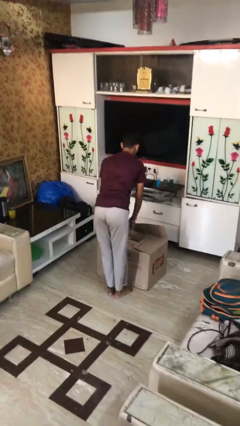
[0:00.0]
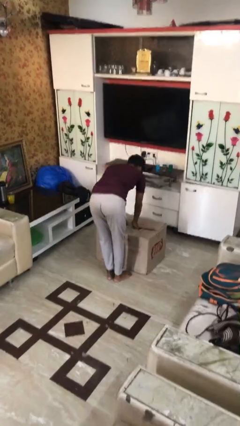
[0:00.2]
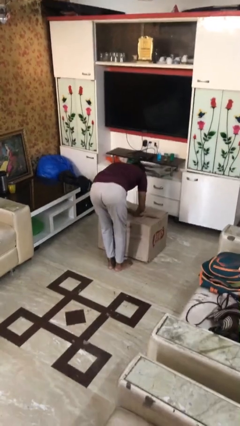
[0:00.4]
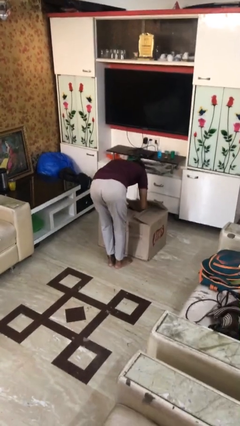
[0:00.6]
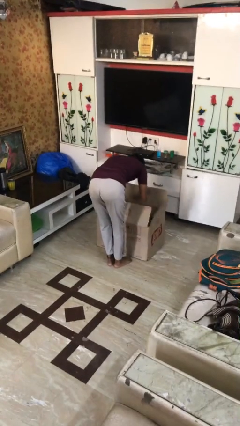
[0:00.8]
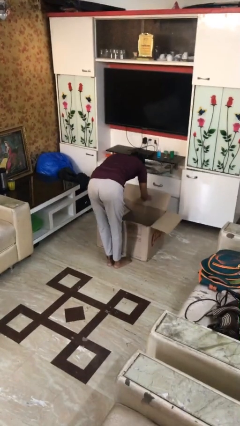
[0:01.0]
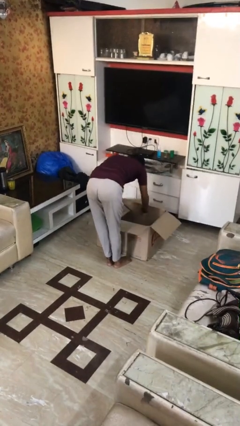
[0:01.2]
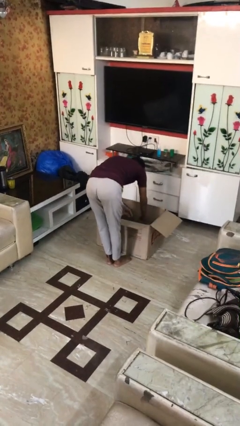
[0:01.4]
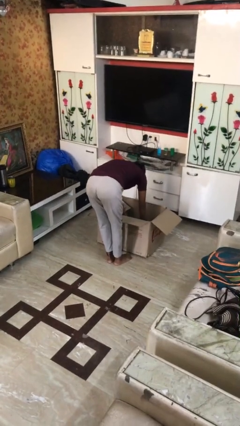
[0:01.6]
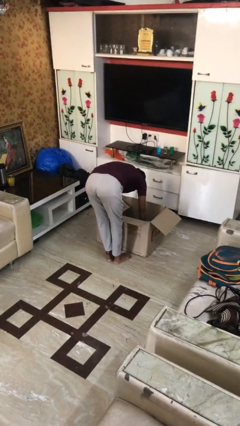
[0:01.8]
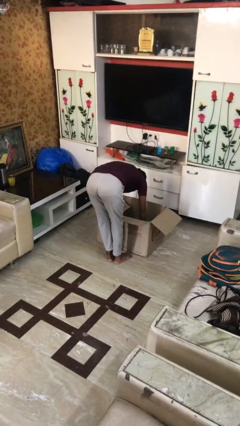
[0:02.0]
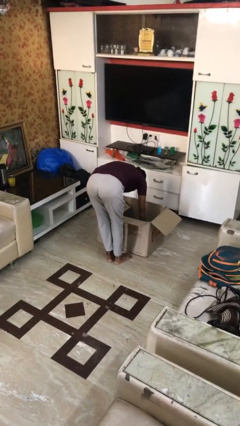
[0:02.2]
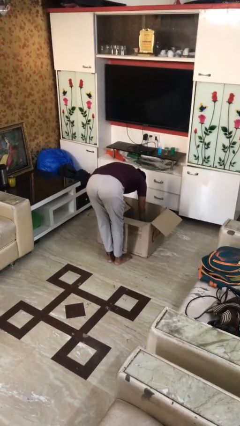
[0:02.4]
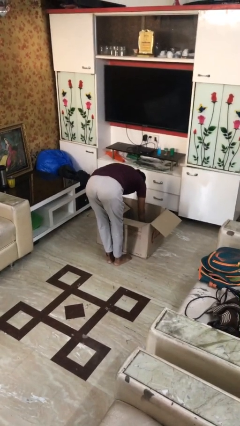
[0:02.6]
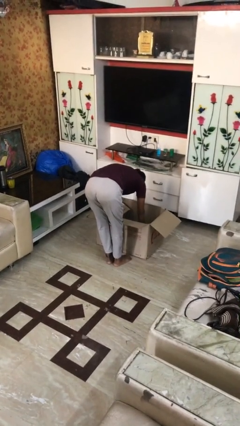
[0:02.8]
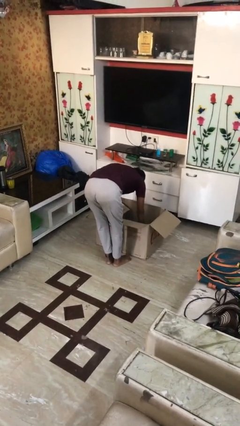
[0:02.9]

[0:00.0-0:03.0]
person searches in box

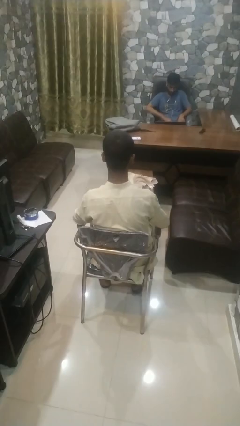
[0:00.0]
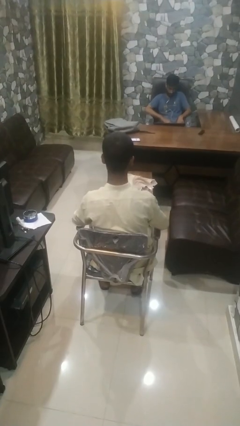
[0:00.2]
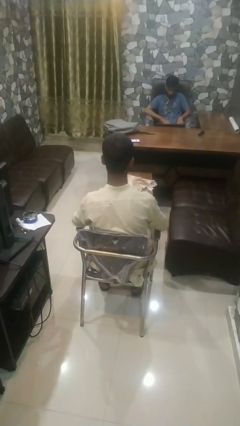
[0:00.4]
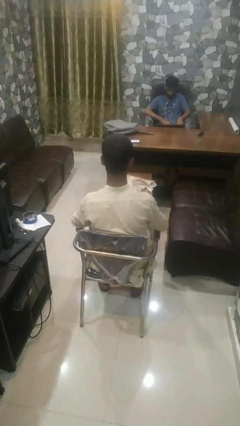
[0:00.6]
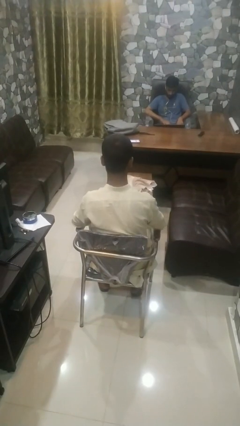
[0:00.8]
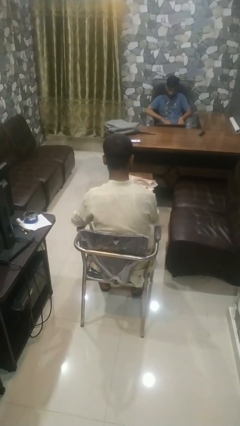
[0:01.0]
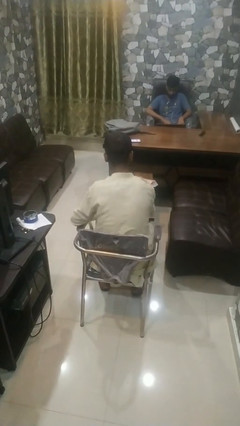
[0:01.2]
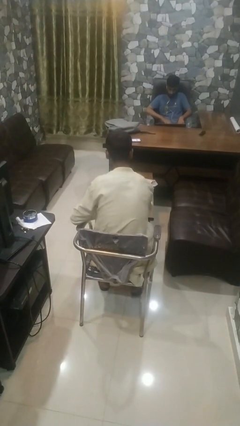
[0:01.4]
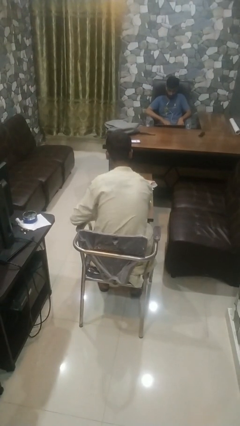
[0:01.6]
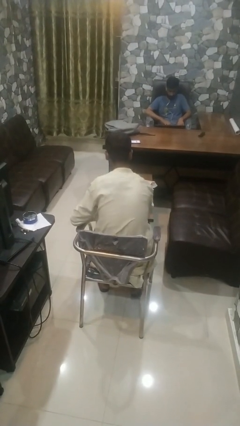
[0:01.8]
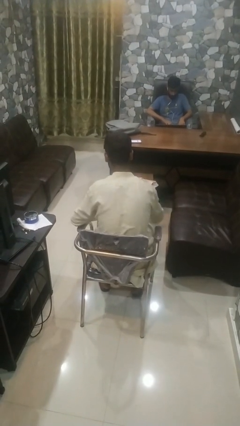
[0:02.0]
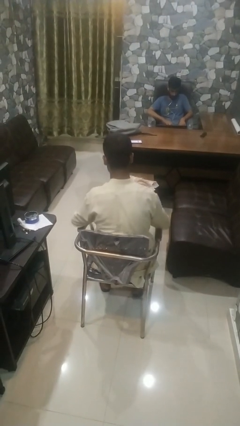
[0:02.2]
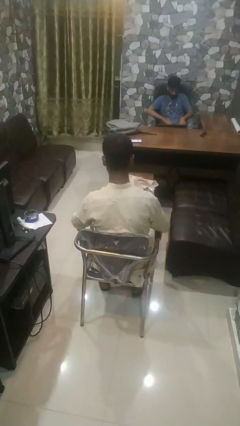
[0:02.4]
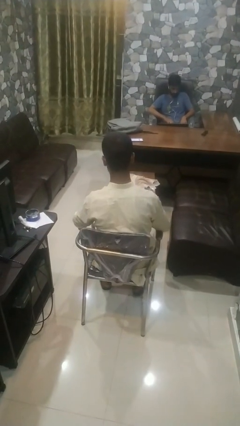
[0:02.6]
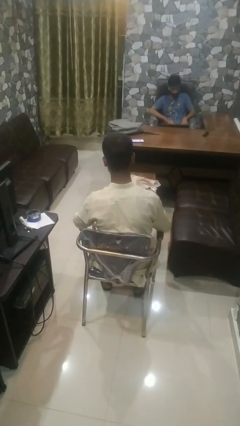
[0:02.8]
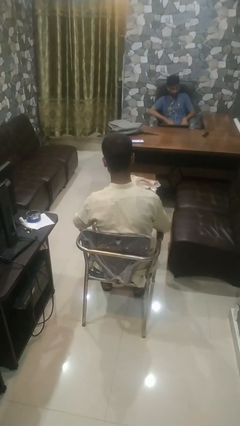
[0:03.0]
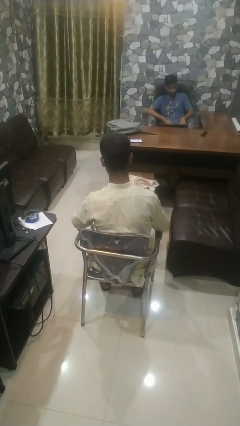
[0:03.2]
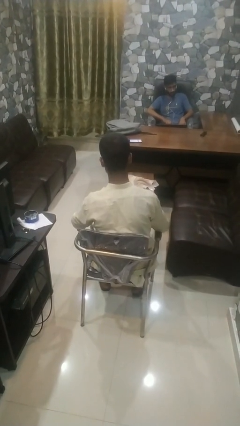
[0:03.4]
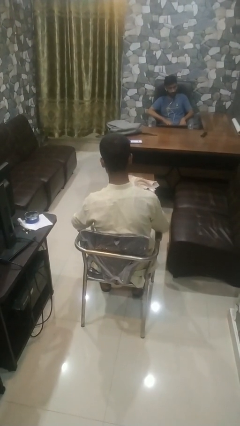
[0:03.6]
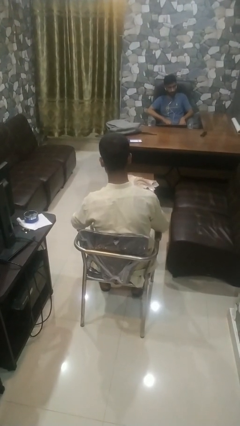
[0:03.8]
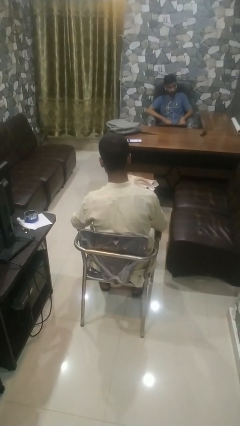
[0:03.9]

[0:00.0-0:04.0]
person paints fingernails

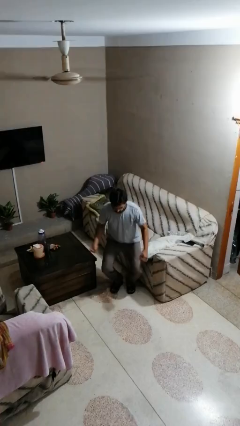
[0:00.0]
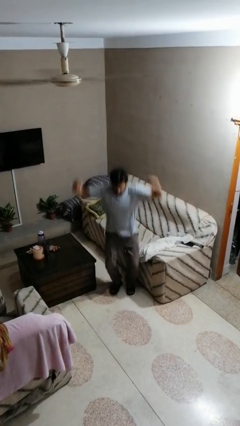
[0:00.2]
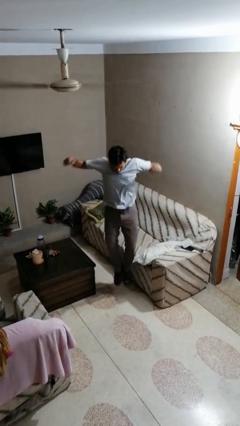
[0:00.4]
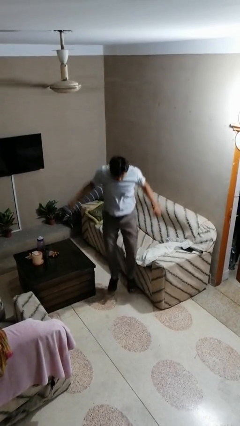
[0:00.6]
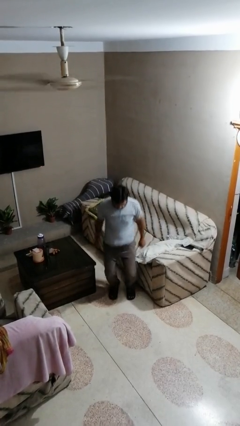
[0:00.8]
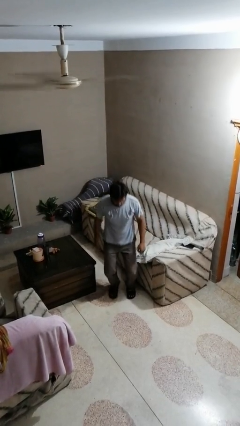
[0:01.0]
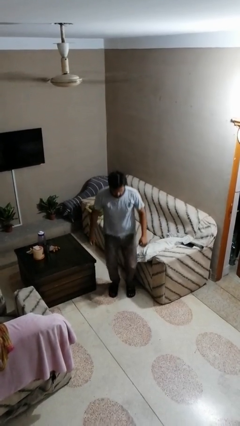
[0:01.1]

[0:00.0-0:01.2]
person jumps

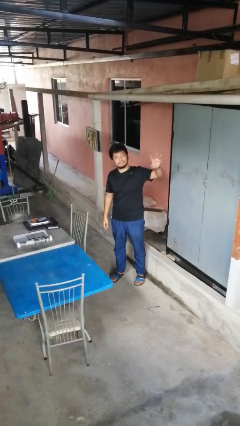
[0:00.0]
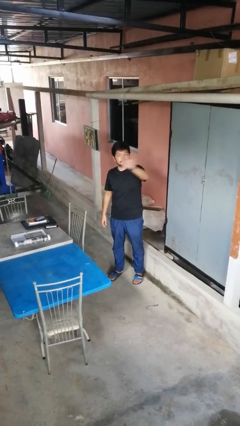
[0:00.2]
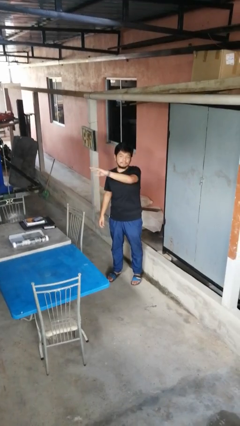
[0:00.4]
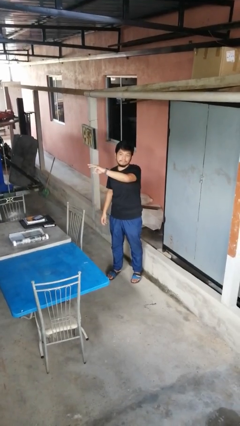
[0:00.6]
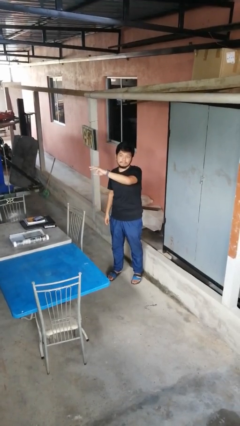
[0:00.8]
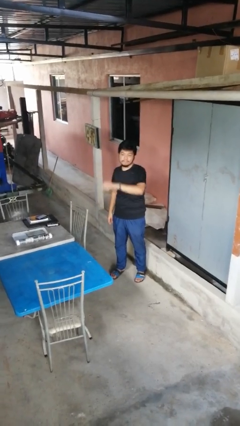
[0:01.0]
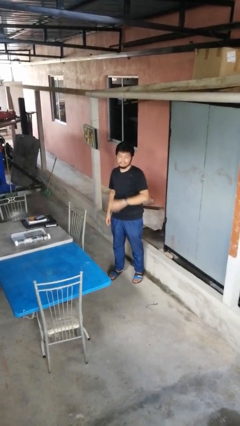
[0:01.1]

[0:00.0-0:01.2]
person gestures swipe right

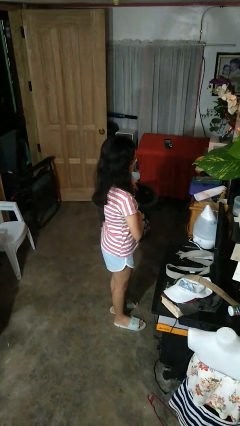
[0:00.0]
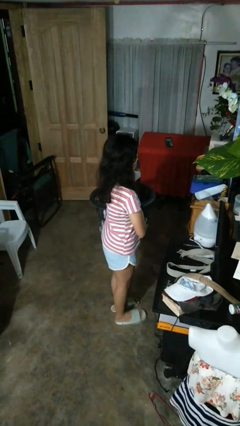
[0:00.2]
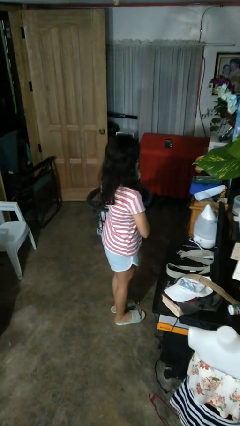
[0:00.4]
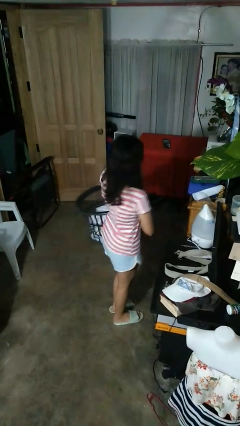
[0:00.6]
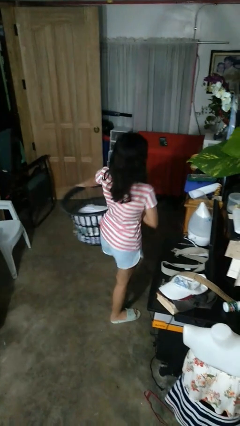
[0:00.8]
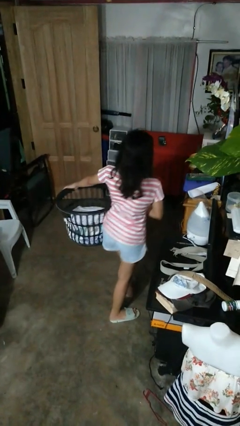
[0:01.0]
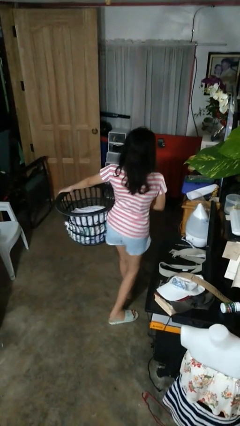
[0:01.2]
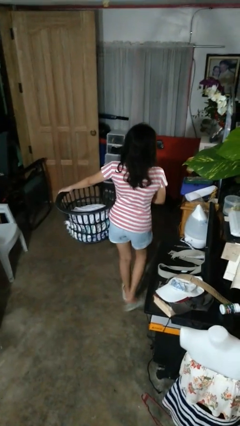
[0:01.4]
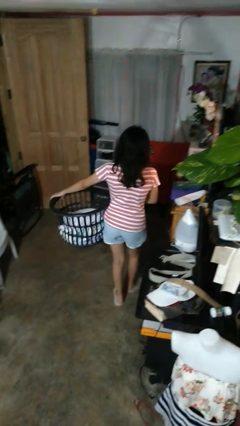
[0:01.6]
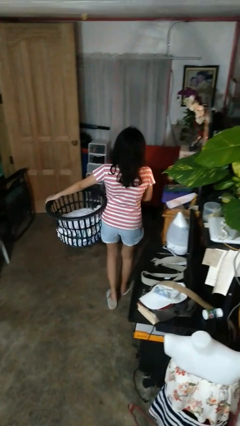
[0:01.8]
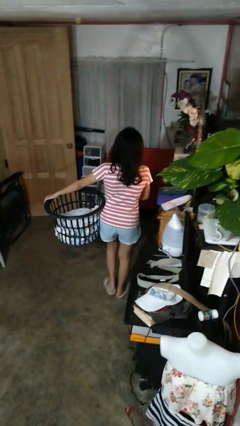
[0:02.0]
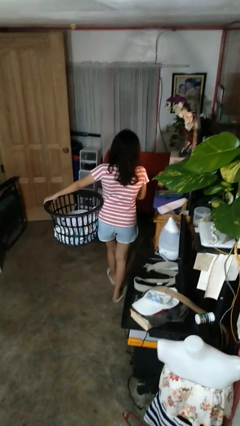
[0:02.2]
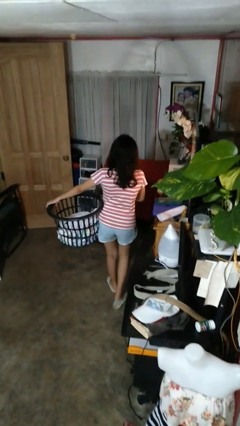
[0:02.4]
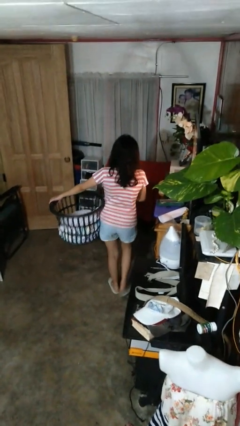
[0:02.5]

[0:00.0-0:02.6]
person carries laundry basket

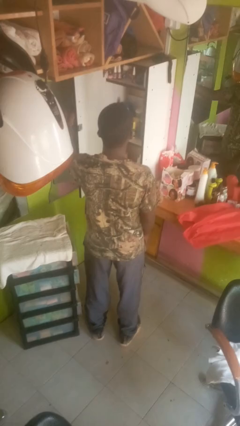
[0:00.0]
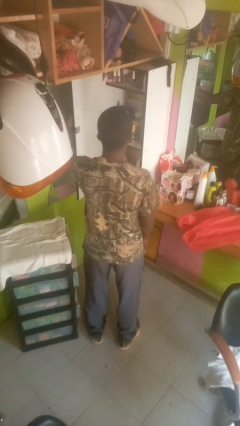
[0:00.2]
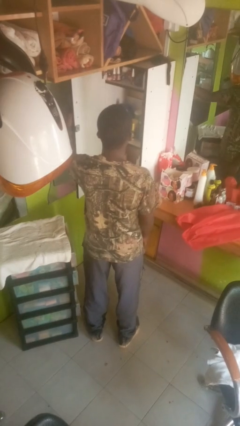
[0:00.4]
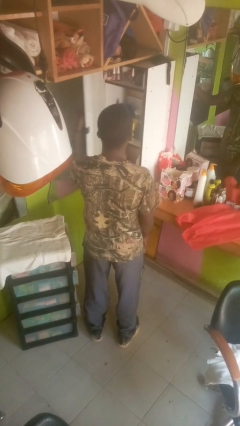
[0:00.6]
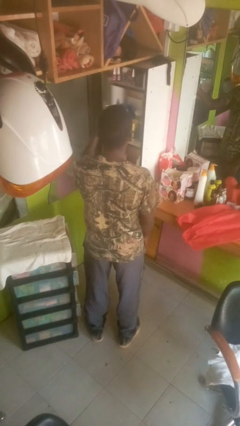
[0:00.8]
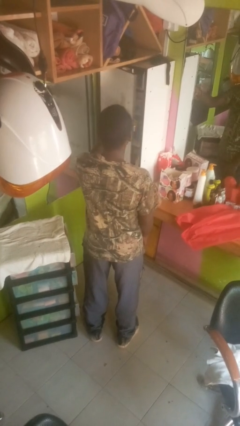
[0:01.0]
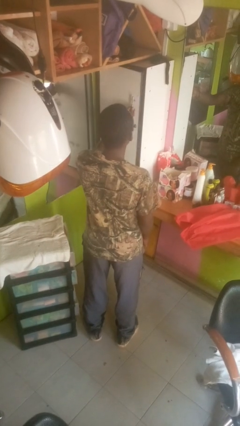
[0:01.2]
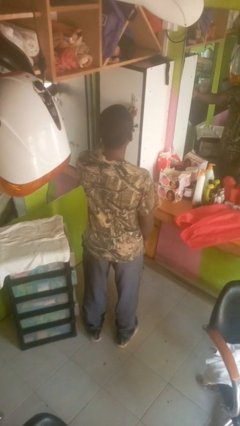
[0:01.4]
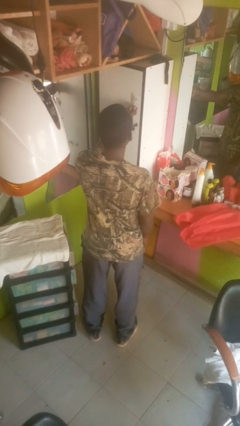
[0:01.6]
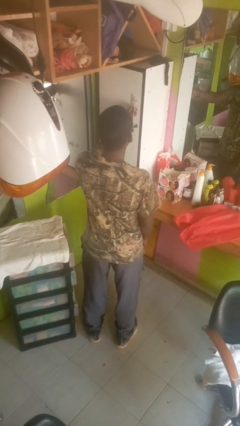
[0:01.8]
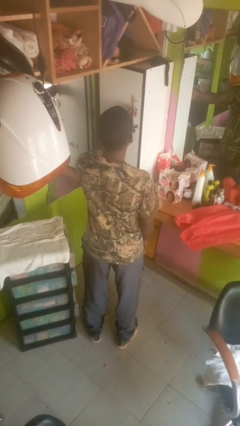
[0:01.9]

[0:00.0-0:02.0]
person closes closet door

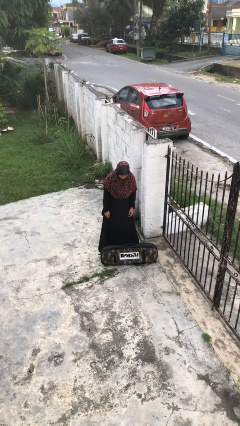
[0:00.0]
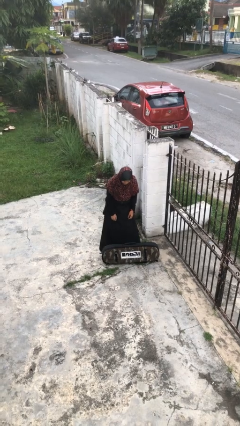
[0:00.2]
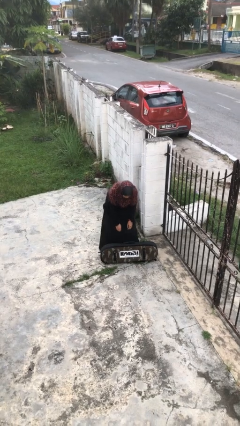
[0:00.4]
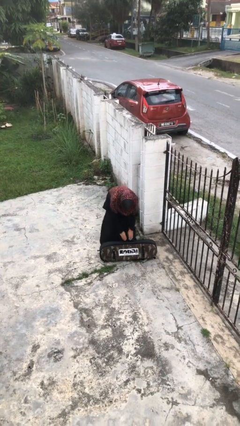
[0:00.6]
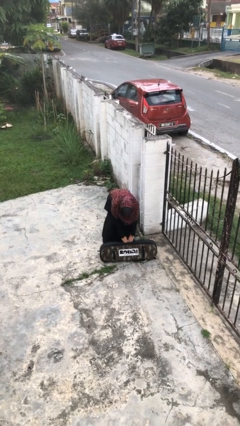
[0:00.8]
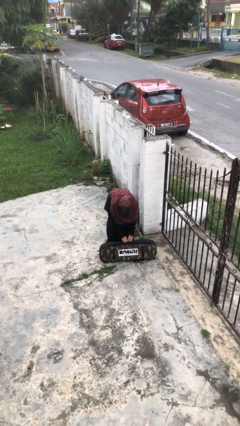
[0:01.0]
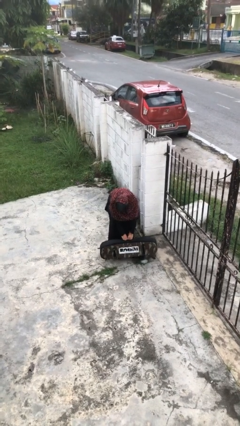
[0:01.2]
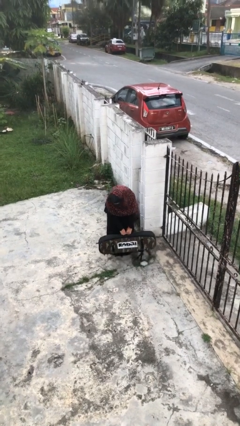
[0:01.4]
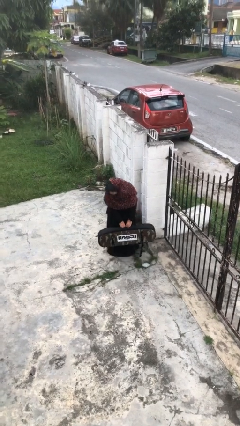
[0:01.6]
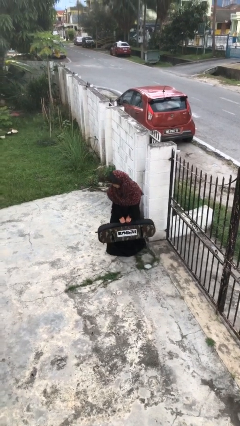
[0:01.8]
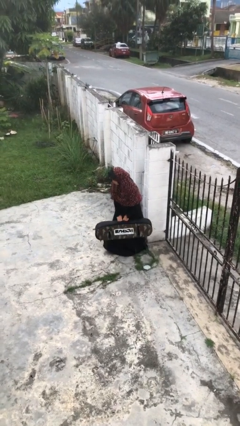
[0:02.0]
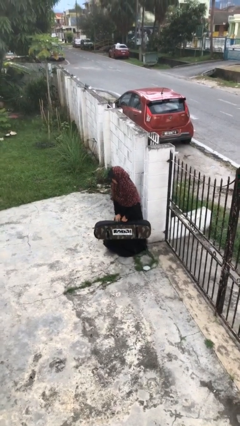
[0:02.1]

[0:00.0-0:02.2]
person picks up object from floor

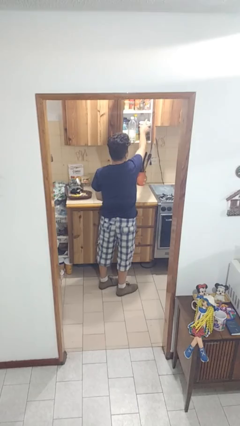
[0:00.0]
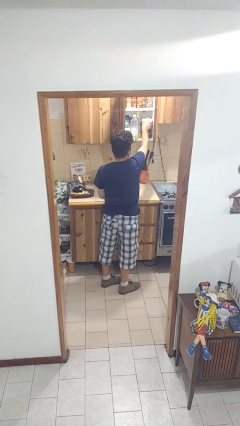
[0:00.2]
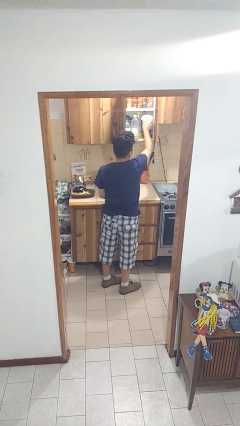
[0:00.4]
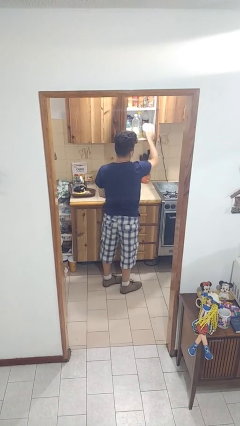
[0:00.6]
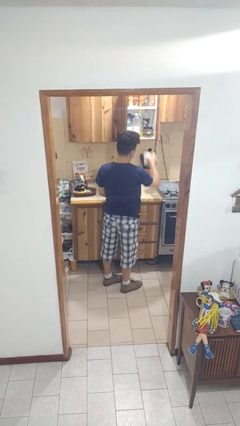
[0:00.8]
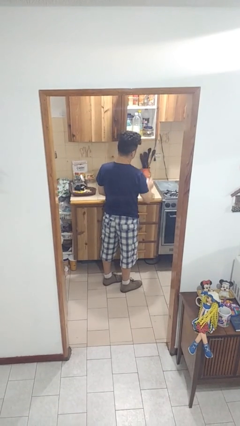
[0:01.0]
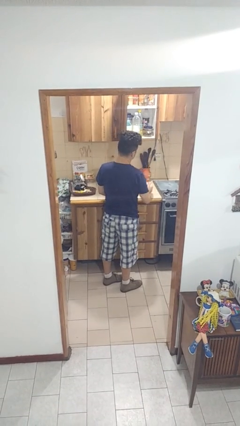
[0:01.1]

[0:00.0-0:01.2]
person takes object from cabinet
